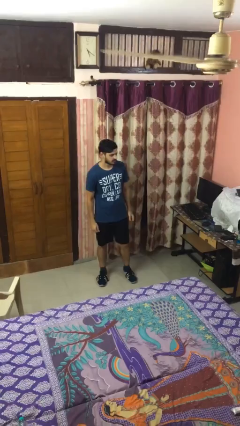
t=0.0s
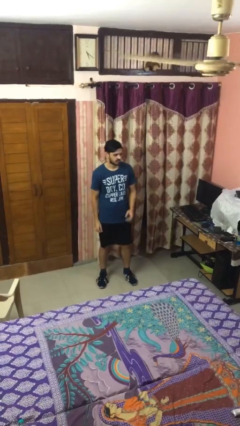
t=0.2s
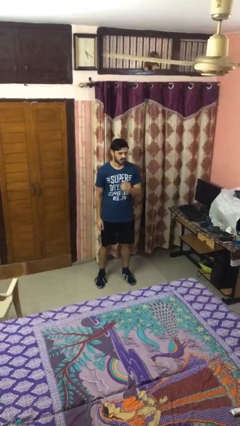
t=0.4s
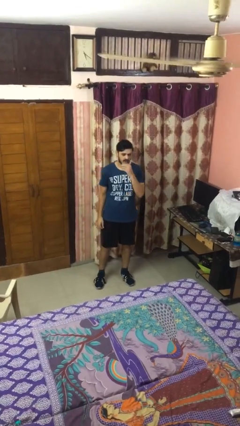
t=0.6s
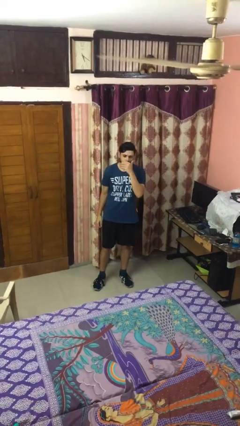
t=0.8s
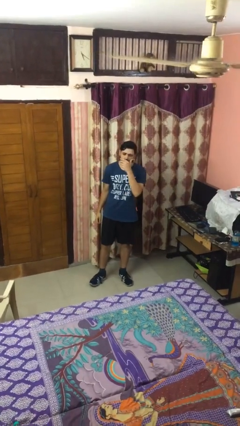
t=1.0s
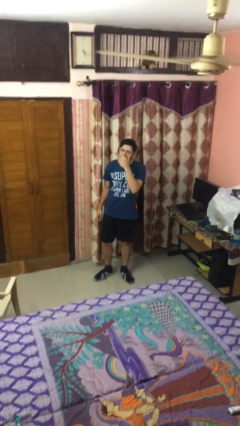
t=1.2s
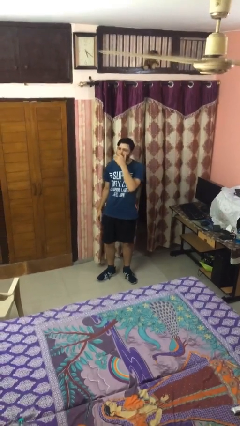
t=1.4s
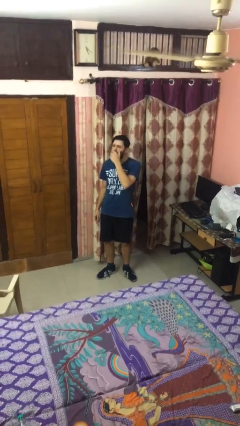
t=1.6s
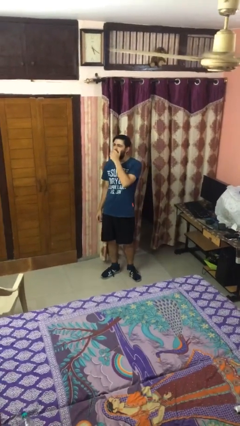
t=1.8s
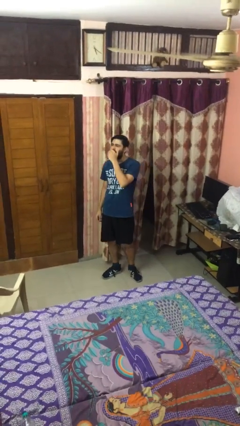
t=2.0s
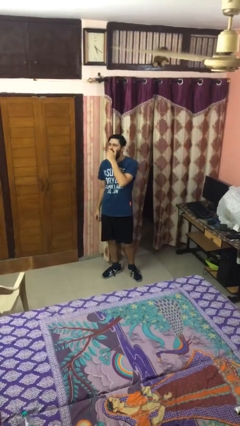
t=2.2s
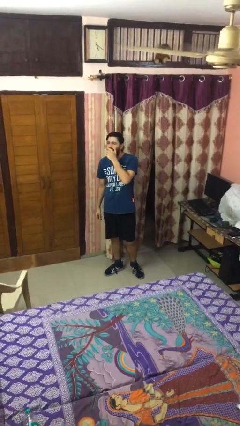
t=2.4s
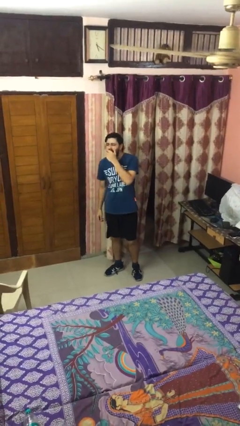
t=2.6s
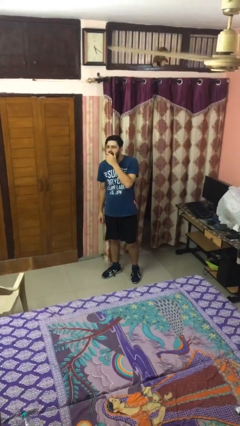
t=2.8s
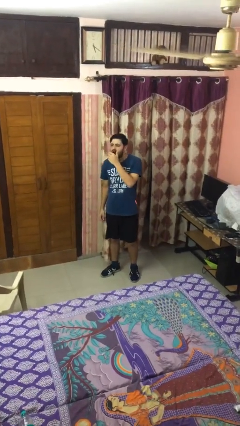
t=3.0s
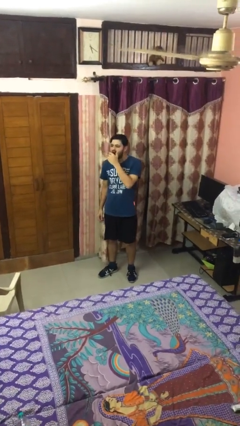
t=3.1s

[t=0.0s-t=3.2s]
person yawns

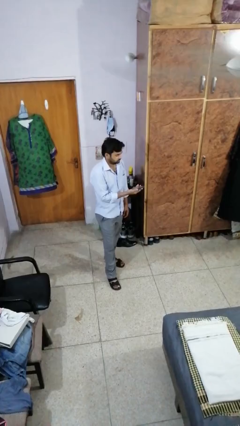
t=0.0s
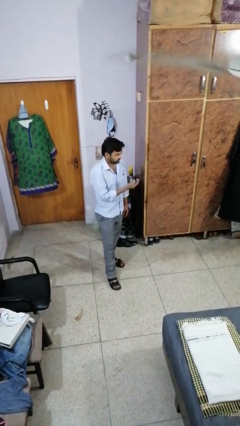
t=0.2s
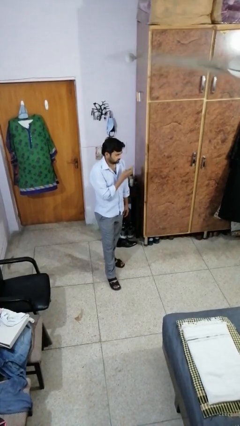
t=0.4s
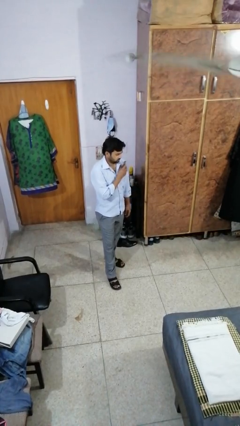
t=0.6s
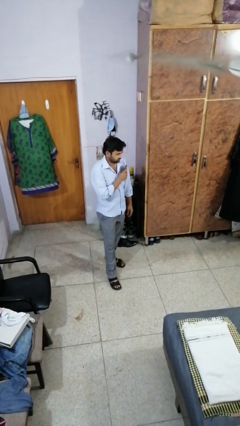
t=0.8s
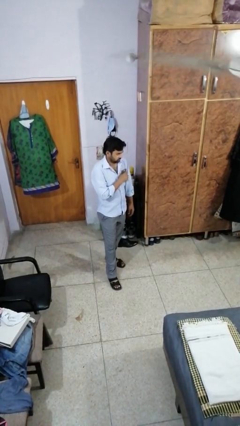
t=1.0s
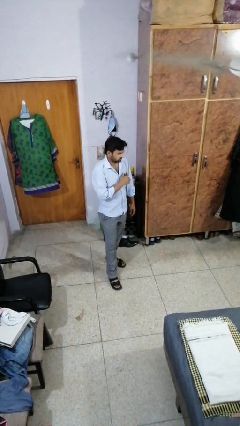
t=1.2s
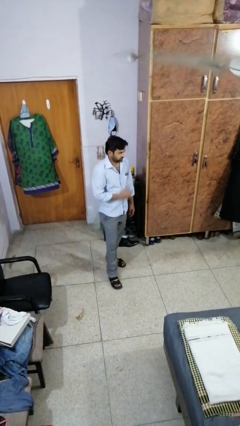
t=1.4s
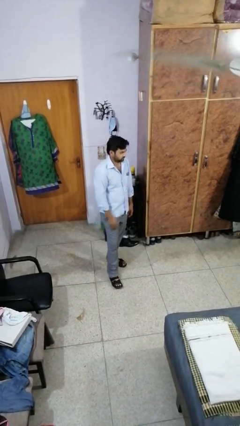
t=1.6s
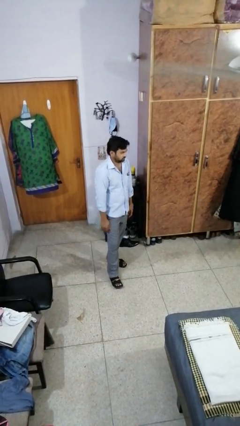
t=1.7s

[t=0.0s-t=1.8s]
person puts phone into pocket

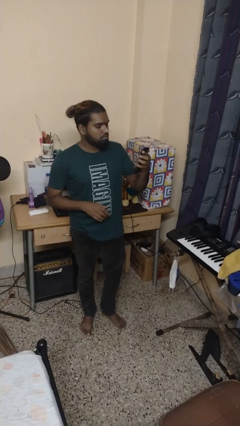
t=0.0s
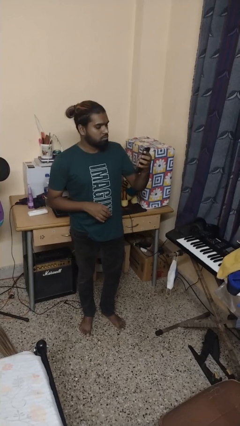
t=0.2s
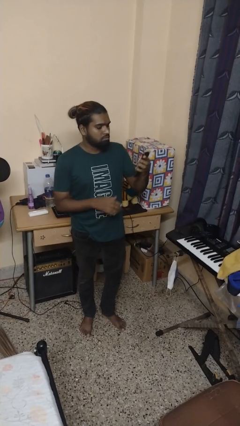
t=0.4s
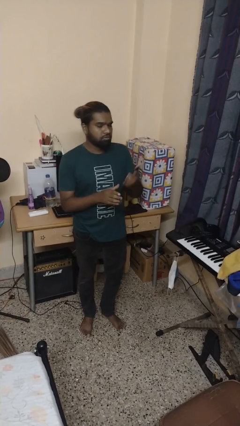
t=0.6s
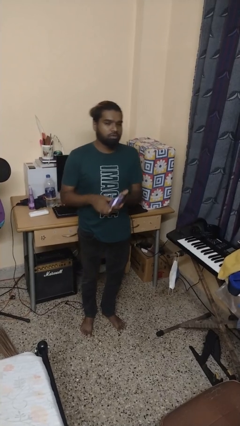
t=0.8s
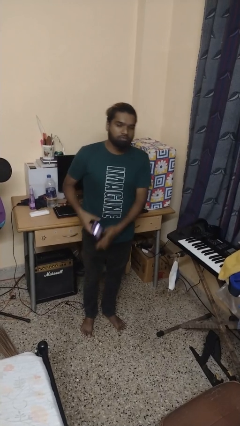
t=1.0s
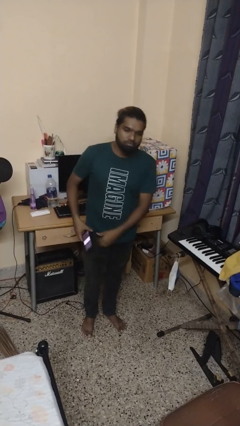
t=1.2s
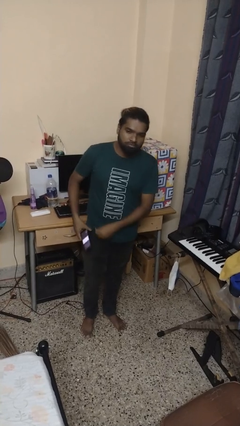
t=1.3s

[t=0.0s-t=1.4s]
person takes phone from pocket

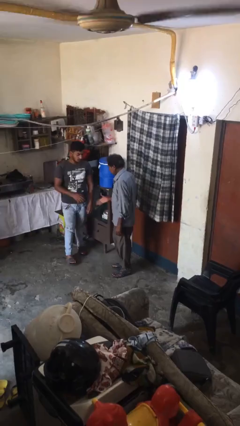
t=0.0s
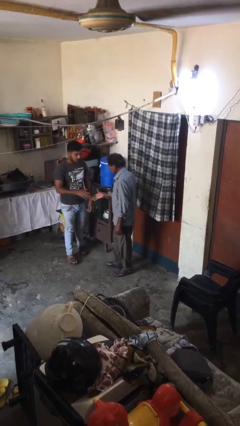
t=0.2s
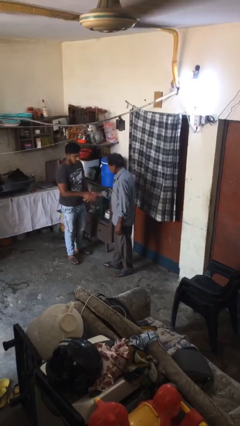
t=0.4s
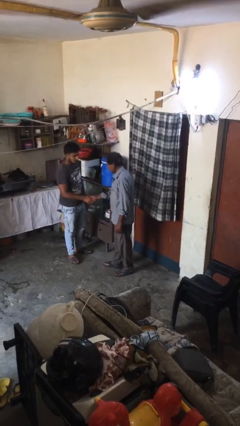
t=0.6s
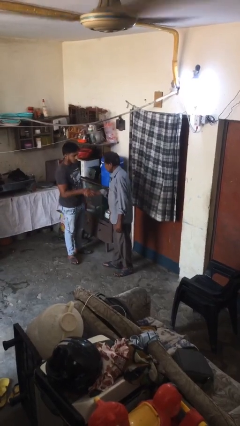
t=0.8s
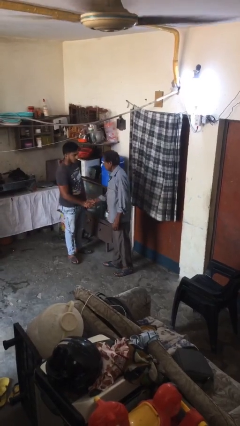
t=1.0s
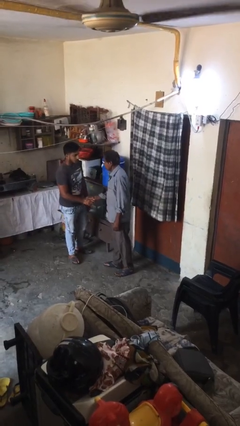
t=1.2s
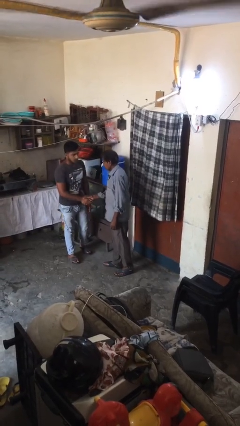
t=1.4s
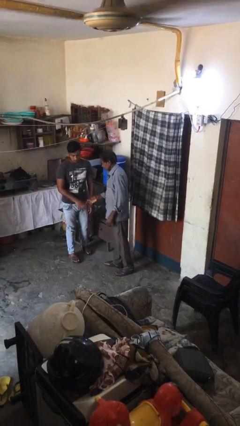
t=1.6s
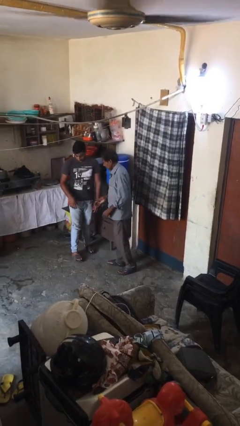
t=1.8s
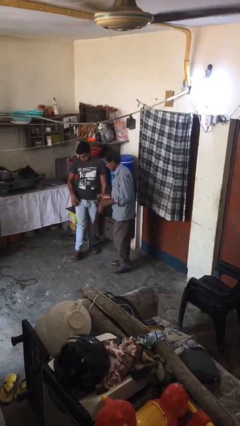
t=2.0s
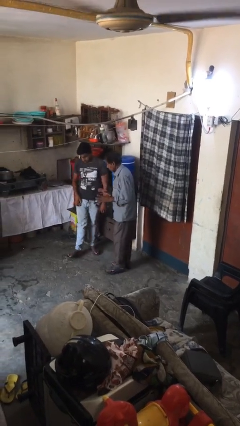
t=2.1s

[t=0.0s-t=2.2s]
person shakes hand

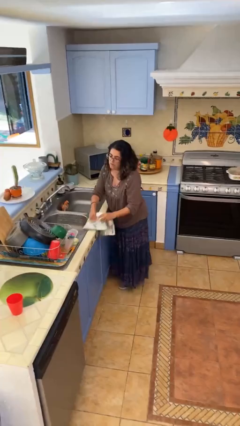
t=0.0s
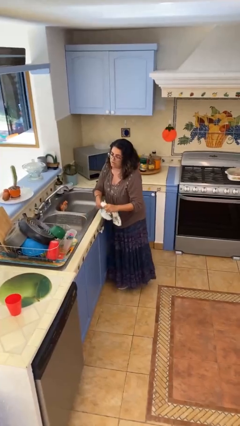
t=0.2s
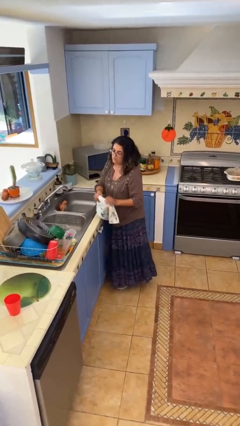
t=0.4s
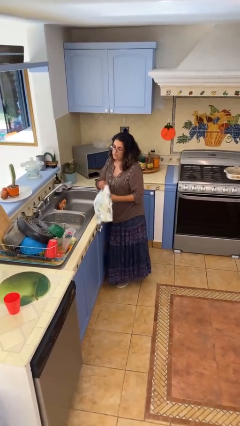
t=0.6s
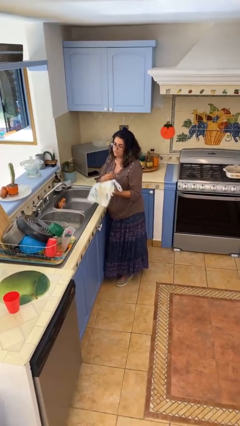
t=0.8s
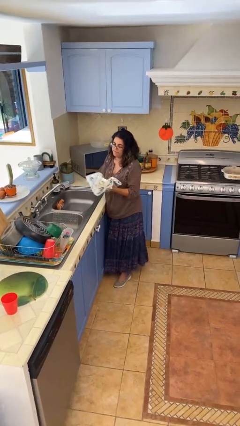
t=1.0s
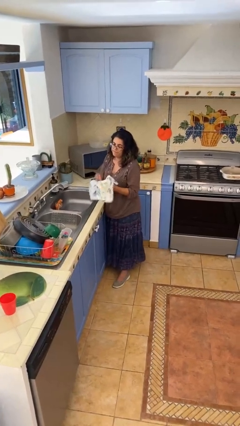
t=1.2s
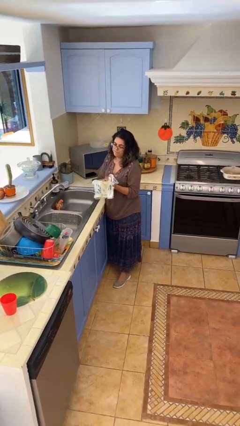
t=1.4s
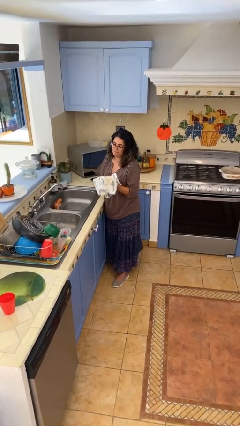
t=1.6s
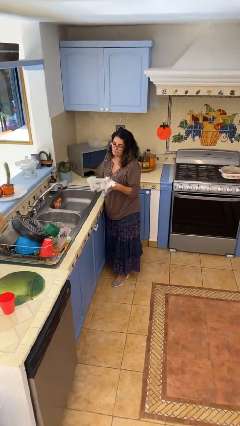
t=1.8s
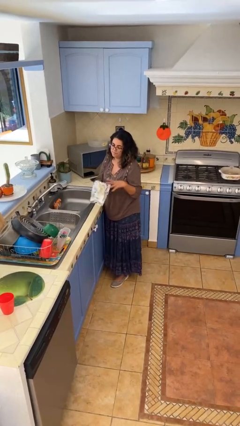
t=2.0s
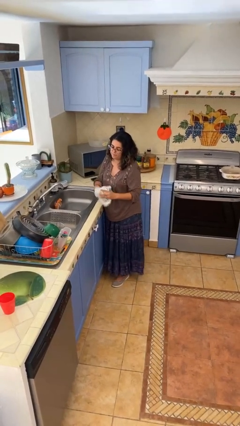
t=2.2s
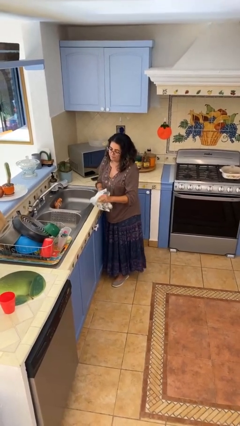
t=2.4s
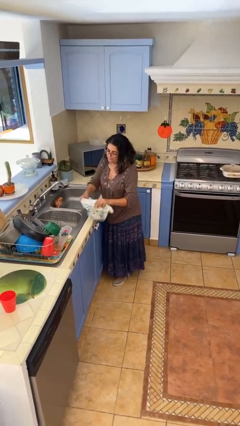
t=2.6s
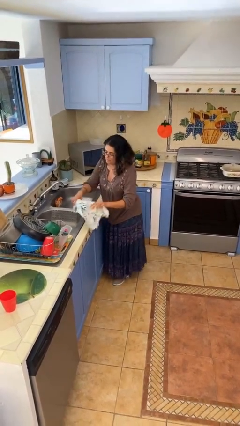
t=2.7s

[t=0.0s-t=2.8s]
person dries hands with towel

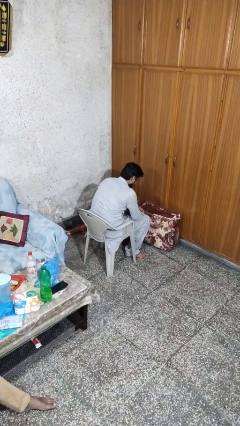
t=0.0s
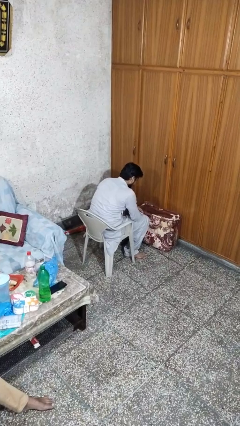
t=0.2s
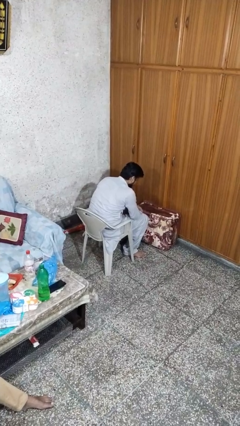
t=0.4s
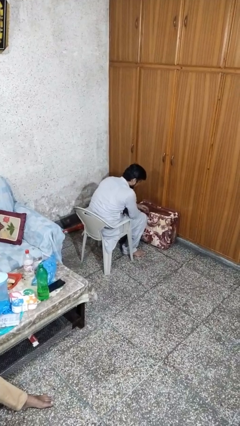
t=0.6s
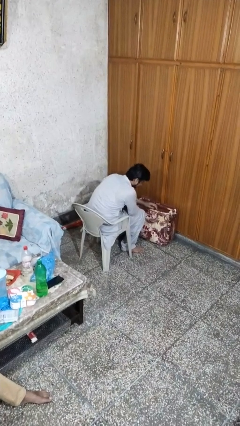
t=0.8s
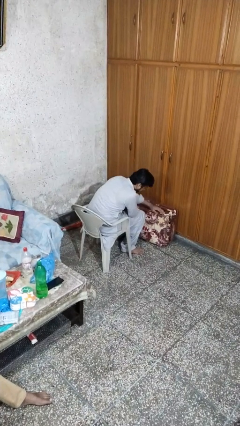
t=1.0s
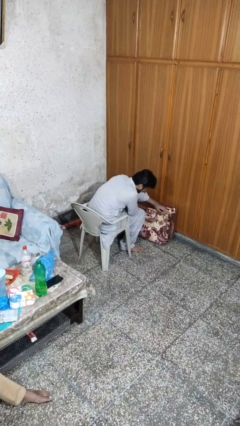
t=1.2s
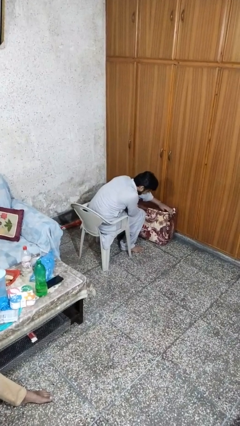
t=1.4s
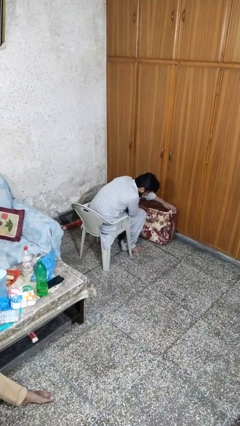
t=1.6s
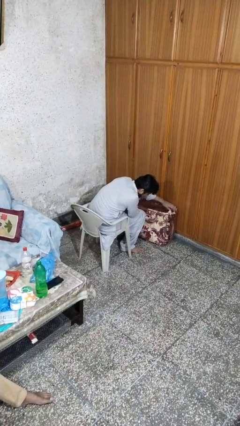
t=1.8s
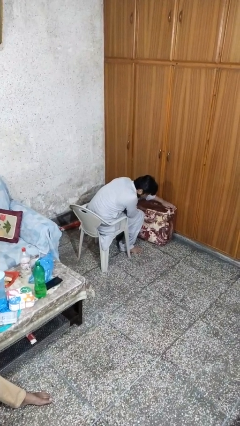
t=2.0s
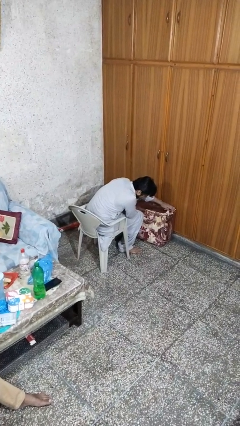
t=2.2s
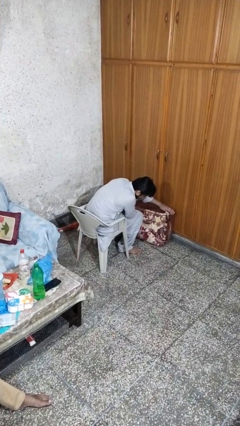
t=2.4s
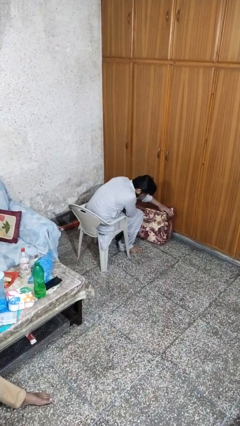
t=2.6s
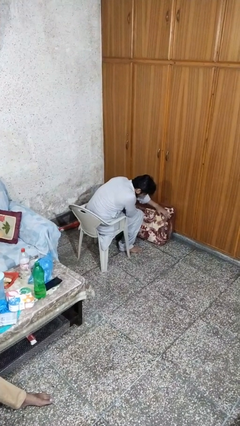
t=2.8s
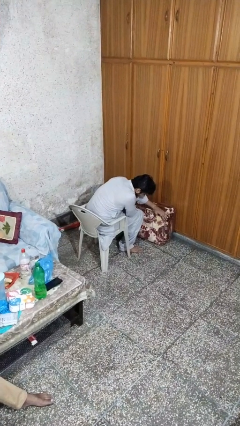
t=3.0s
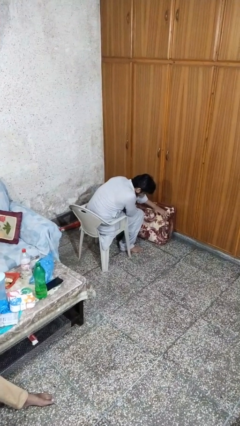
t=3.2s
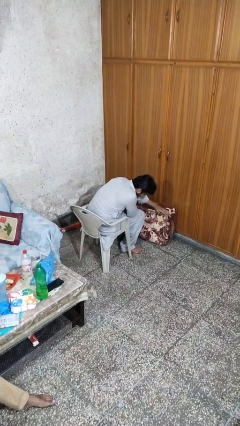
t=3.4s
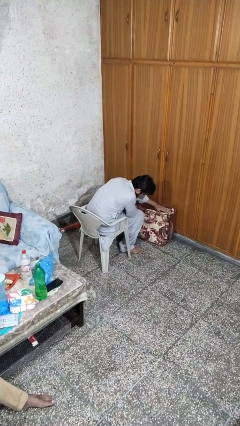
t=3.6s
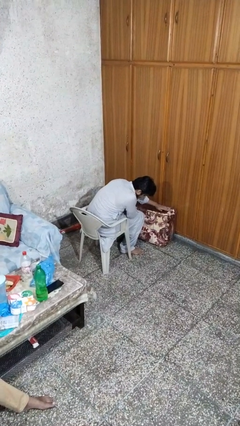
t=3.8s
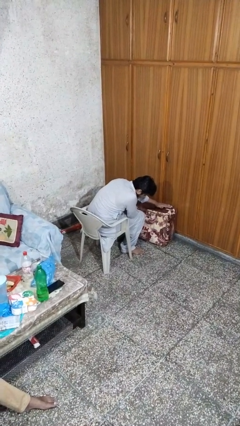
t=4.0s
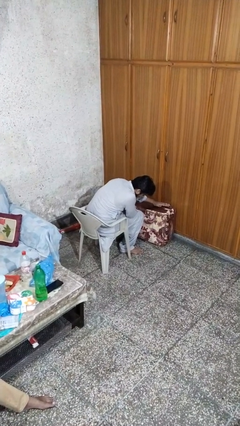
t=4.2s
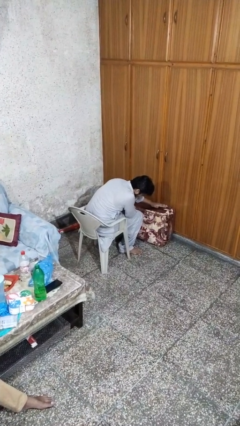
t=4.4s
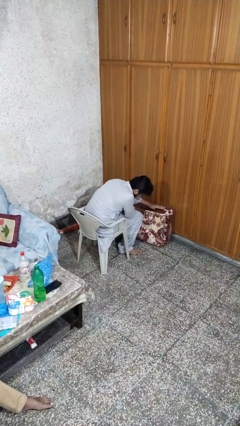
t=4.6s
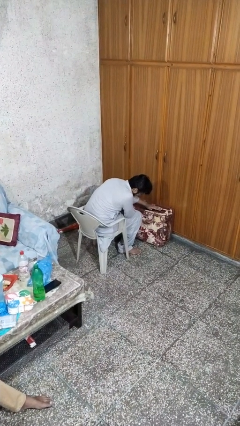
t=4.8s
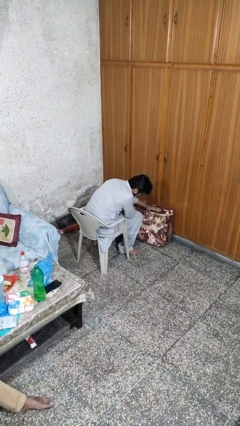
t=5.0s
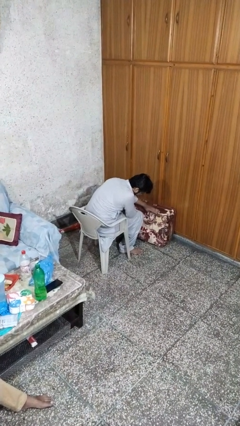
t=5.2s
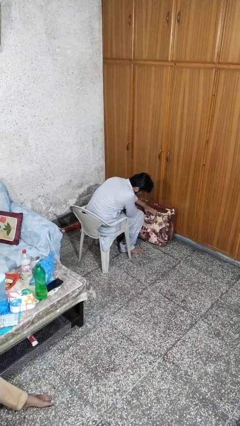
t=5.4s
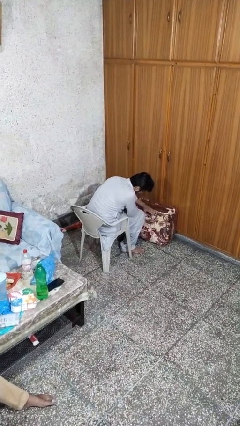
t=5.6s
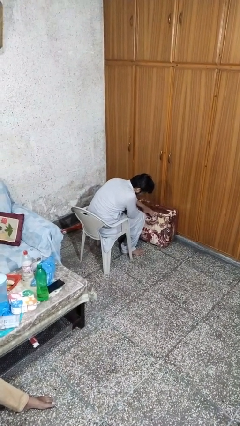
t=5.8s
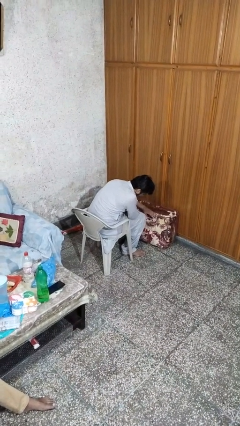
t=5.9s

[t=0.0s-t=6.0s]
person waves hand over object

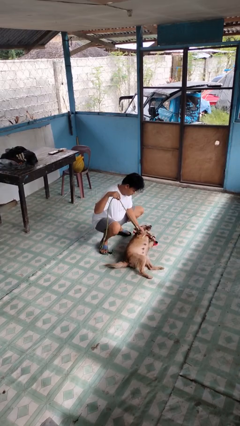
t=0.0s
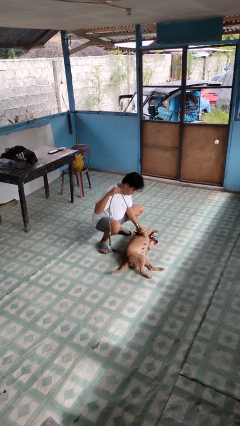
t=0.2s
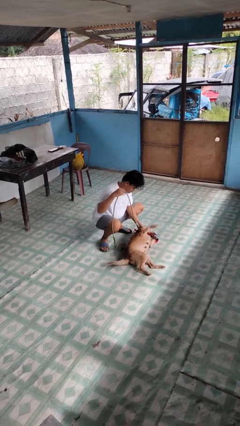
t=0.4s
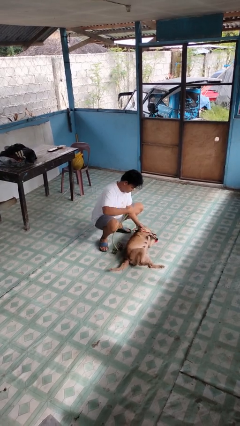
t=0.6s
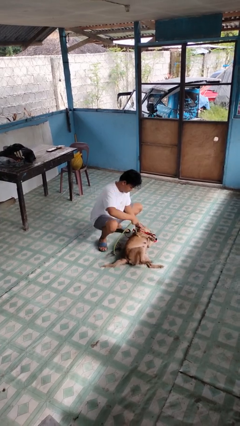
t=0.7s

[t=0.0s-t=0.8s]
person unattaches leash from dog
